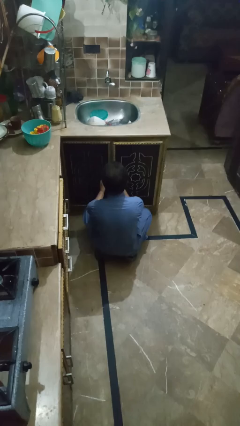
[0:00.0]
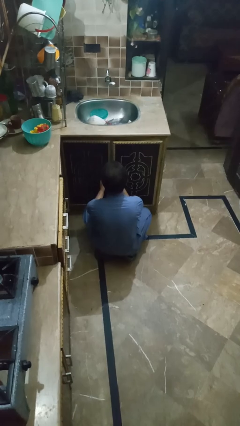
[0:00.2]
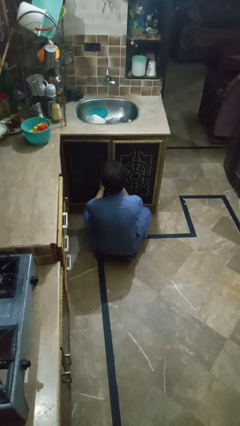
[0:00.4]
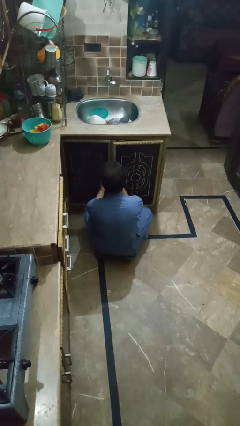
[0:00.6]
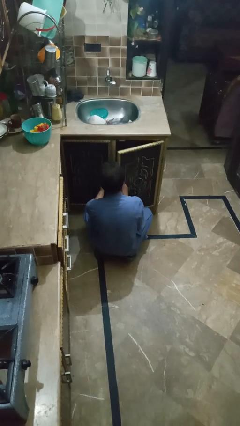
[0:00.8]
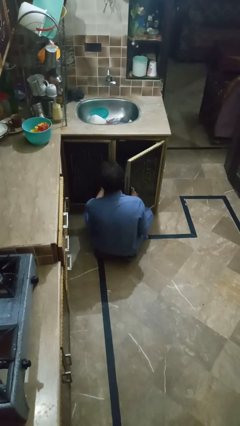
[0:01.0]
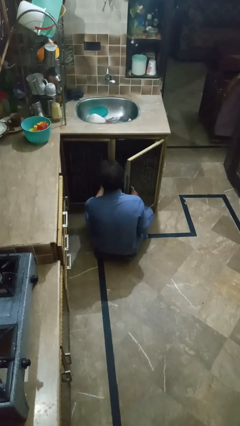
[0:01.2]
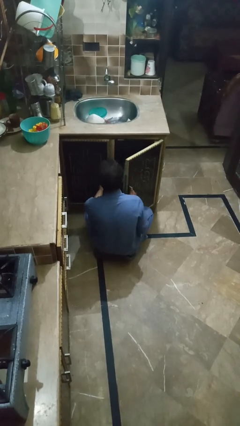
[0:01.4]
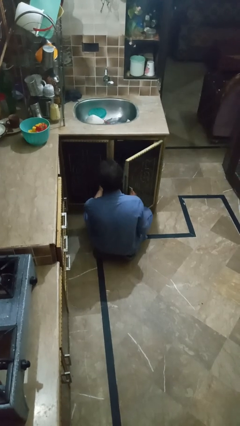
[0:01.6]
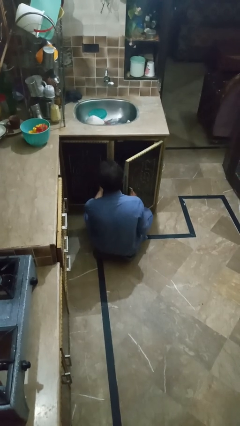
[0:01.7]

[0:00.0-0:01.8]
person opens kitchen drawer

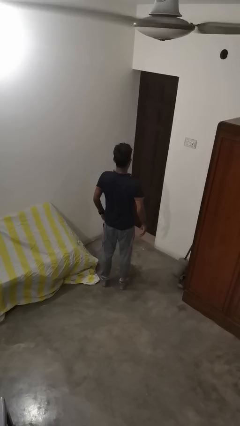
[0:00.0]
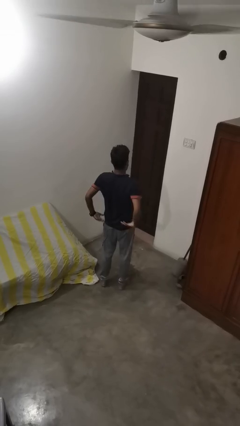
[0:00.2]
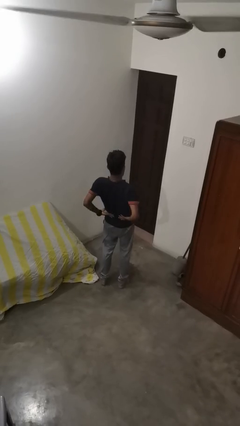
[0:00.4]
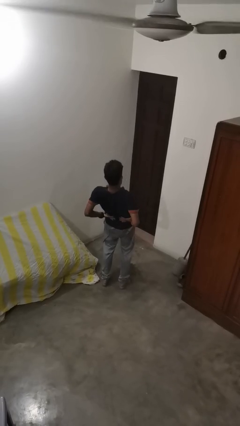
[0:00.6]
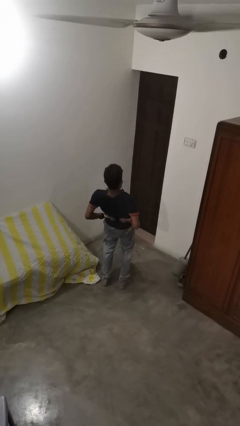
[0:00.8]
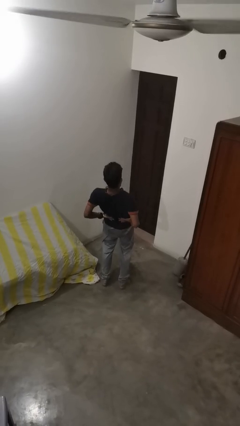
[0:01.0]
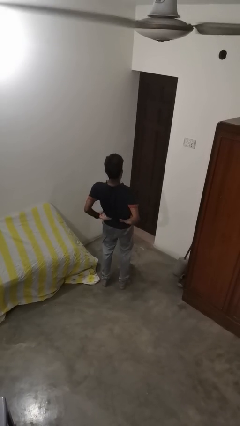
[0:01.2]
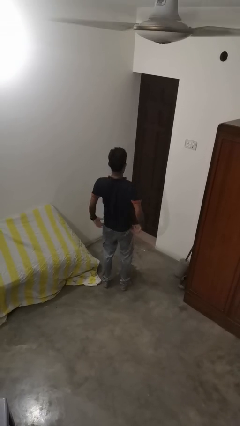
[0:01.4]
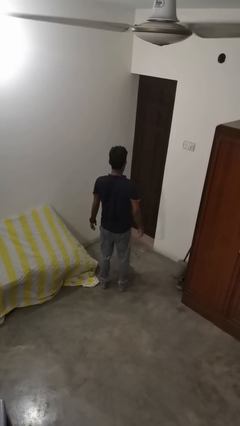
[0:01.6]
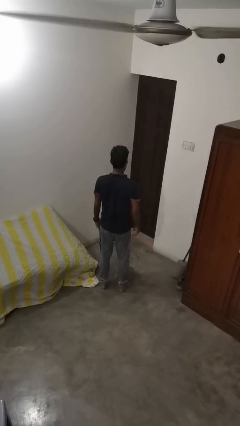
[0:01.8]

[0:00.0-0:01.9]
person stretches back

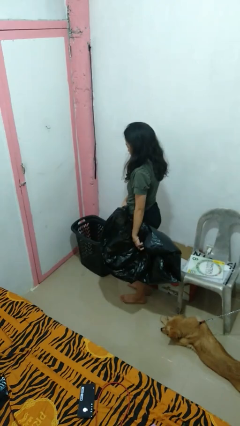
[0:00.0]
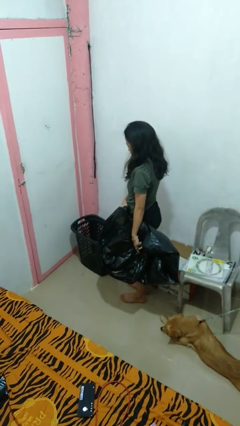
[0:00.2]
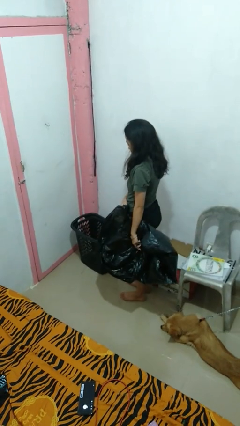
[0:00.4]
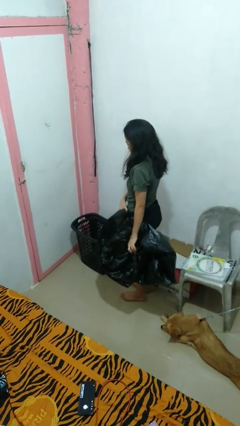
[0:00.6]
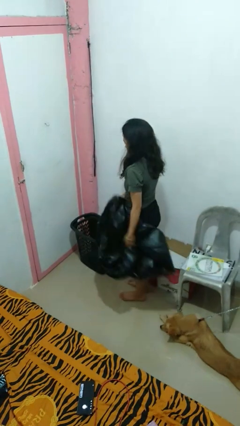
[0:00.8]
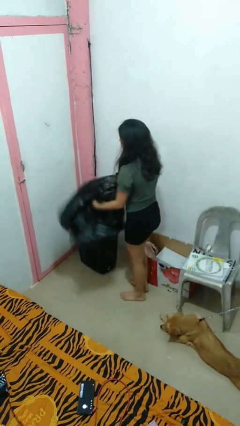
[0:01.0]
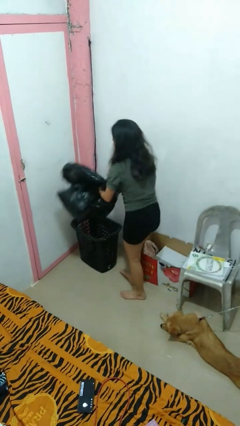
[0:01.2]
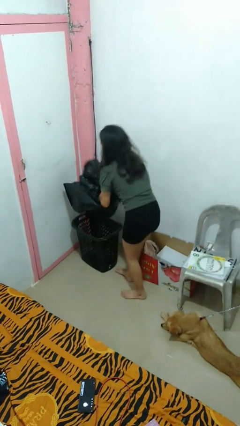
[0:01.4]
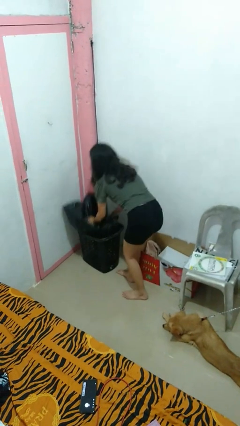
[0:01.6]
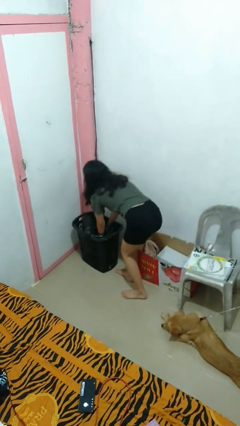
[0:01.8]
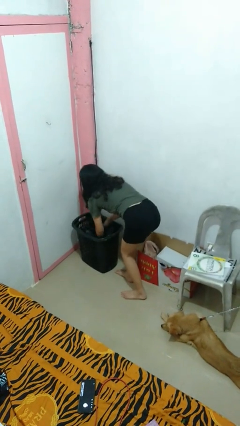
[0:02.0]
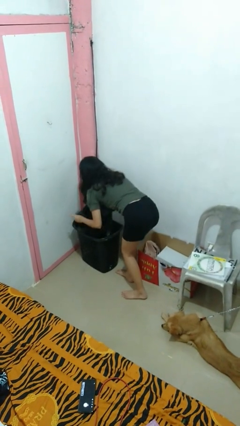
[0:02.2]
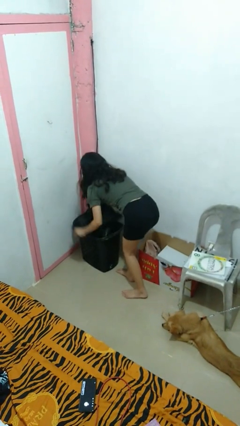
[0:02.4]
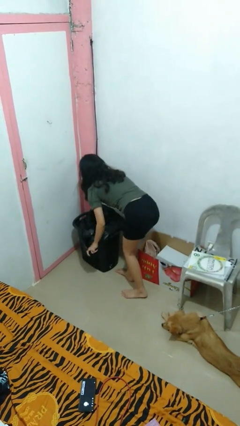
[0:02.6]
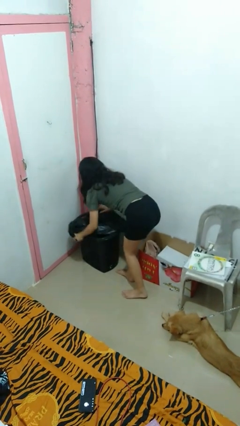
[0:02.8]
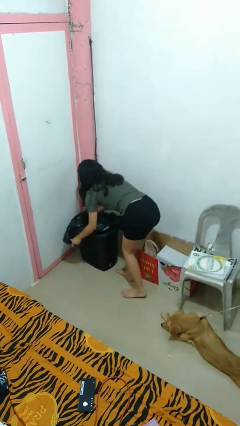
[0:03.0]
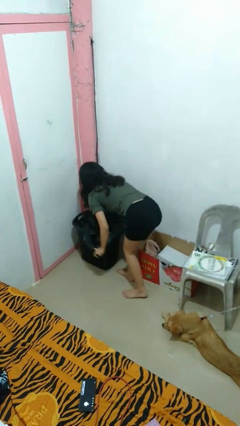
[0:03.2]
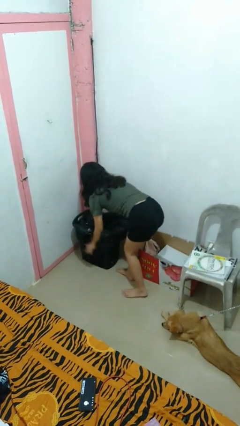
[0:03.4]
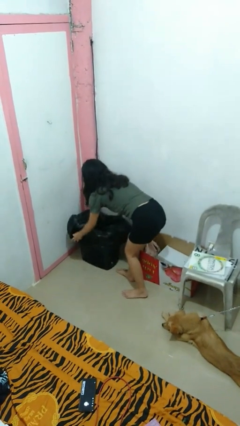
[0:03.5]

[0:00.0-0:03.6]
person inserts trashbag into trashcan

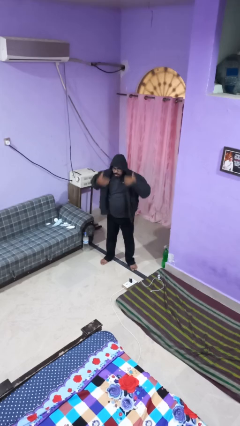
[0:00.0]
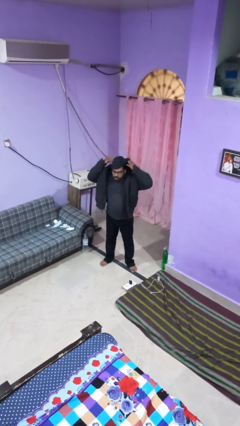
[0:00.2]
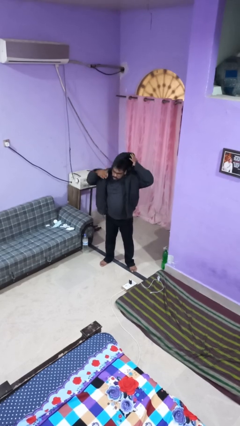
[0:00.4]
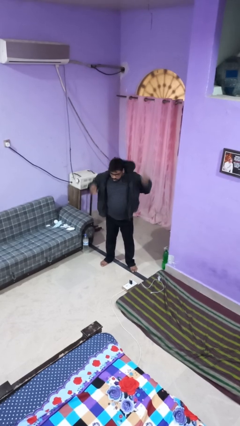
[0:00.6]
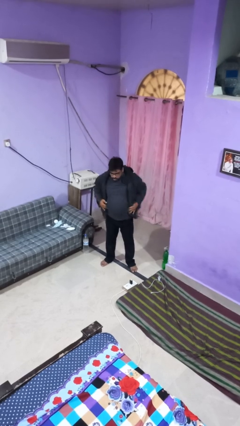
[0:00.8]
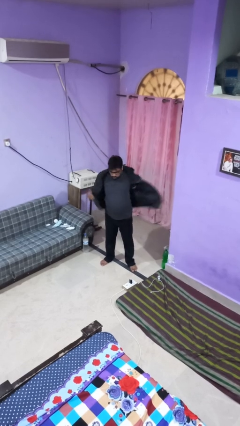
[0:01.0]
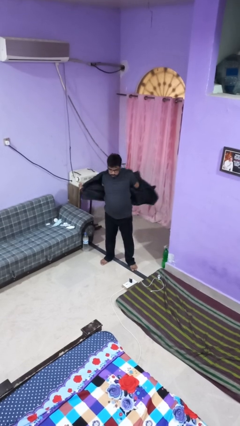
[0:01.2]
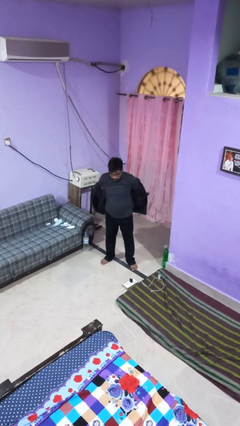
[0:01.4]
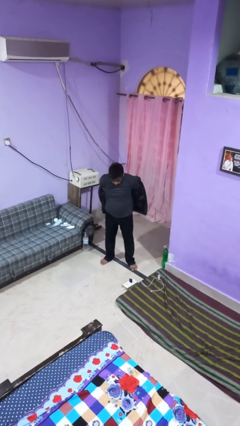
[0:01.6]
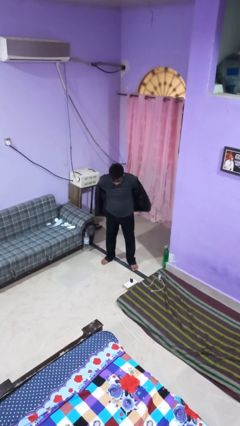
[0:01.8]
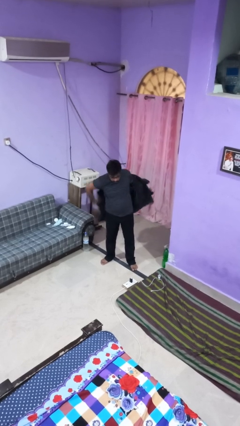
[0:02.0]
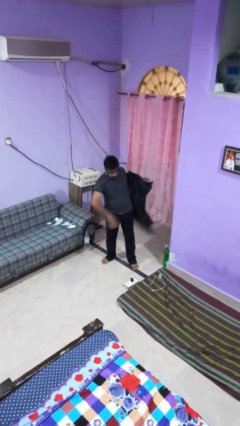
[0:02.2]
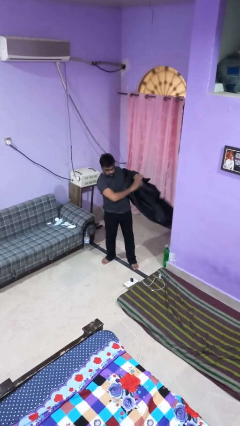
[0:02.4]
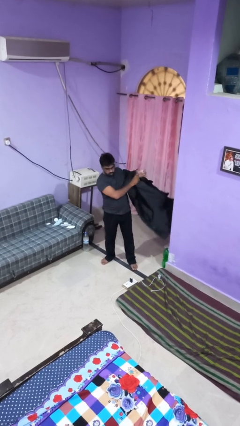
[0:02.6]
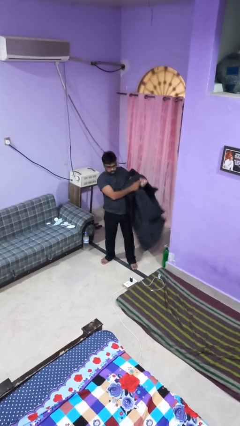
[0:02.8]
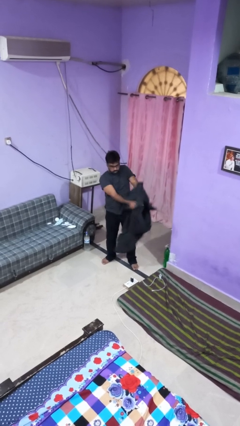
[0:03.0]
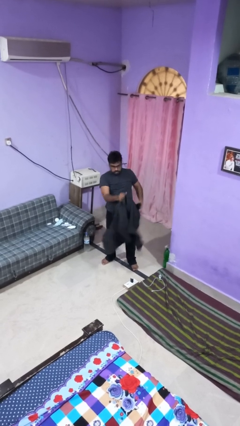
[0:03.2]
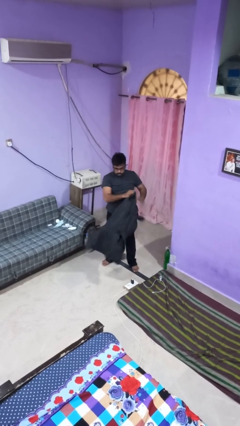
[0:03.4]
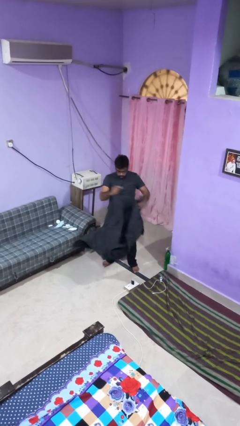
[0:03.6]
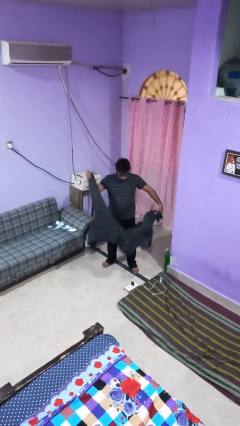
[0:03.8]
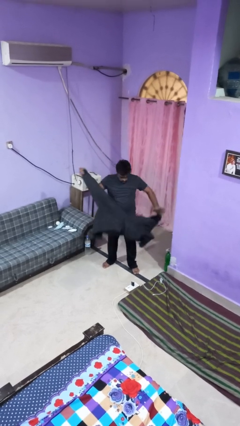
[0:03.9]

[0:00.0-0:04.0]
person takes off hoodie

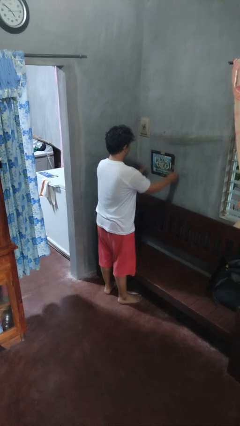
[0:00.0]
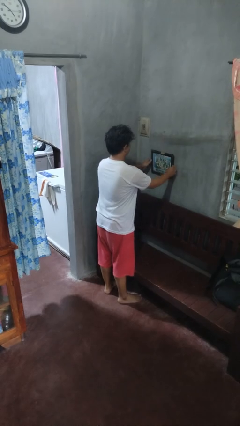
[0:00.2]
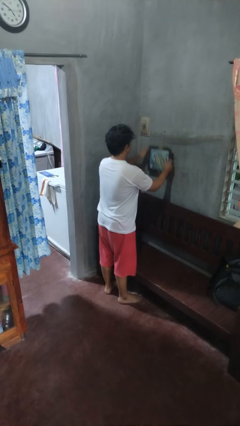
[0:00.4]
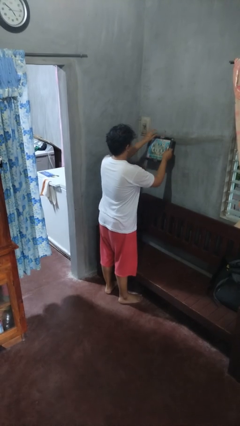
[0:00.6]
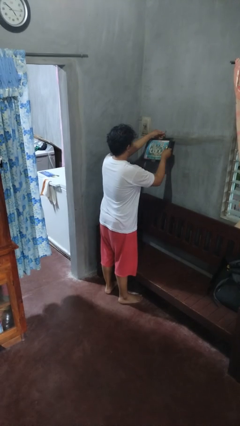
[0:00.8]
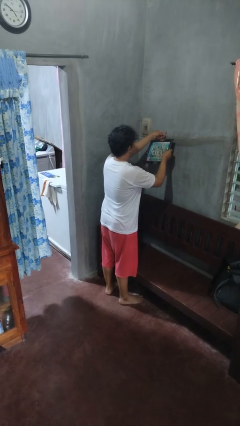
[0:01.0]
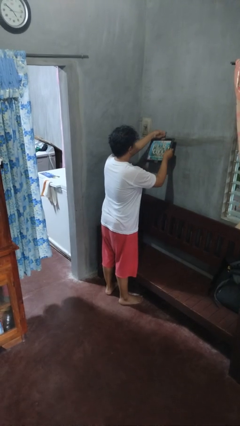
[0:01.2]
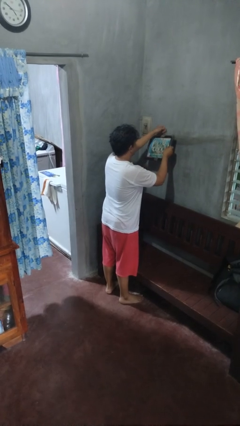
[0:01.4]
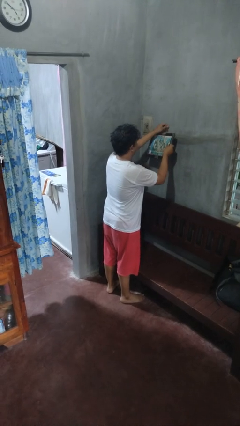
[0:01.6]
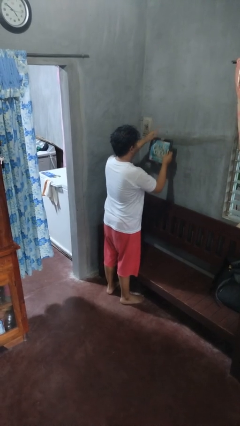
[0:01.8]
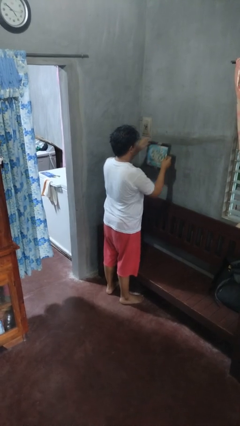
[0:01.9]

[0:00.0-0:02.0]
person takes down picture frame

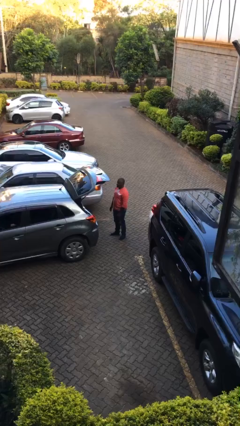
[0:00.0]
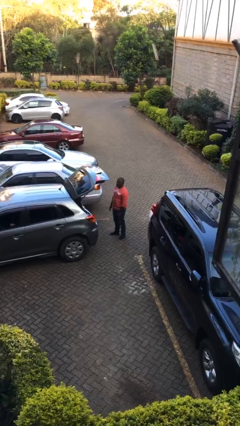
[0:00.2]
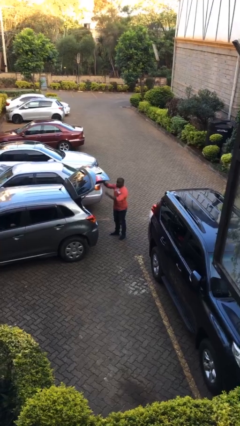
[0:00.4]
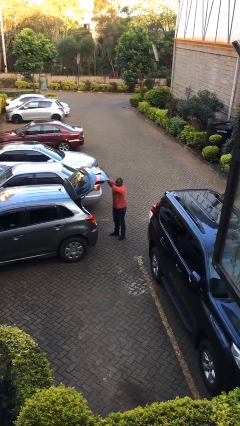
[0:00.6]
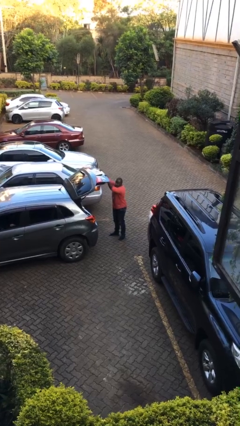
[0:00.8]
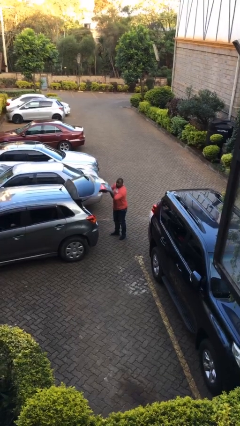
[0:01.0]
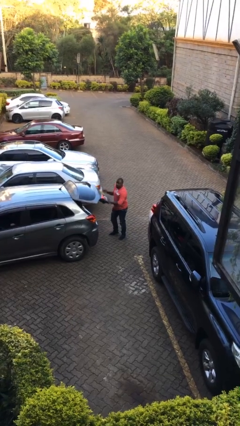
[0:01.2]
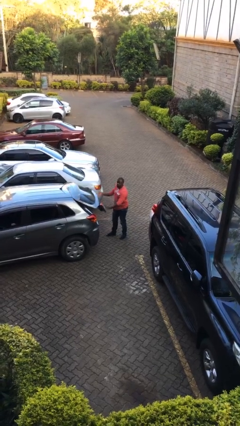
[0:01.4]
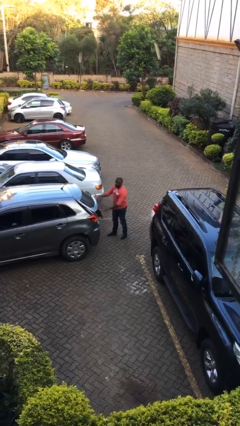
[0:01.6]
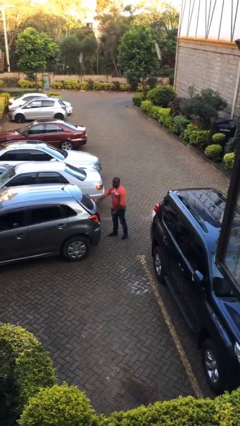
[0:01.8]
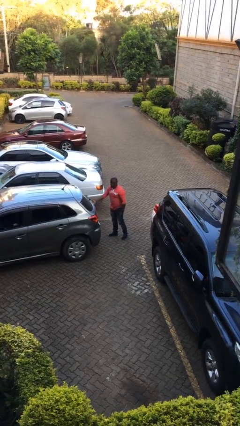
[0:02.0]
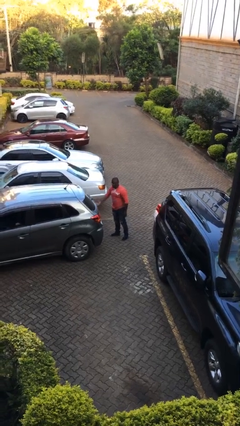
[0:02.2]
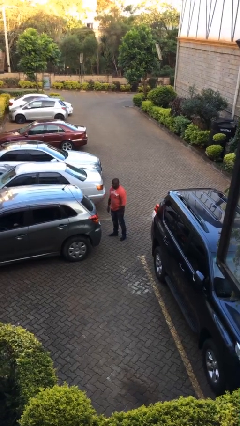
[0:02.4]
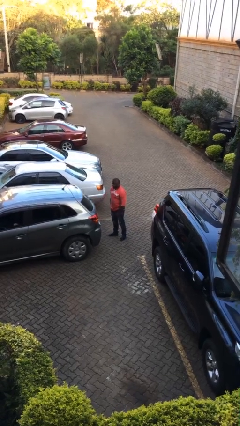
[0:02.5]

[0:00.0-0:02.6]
person closes car trunk

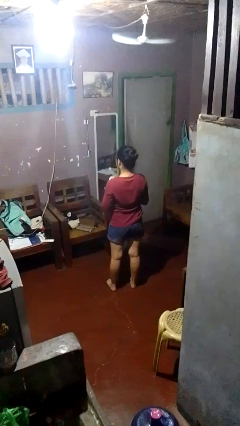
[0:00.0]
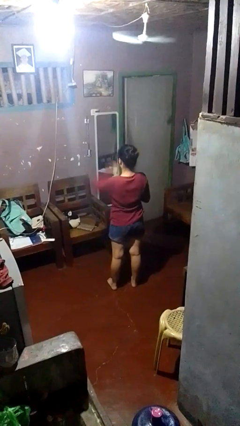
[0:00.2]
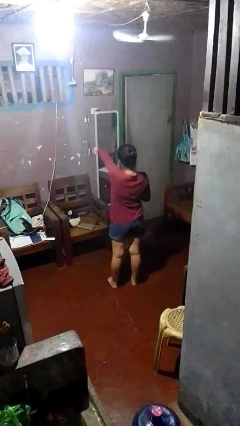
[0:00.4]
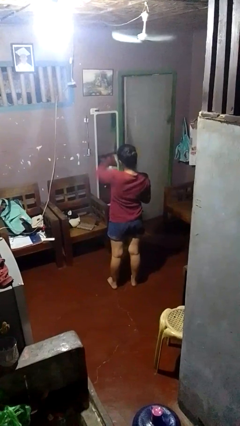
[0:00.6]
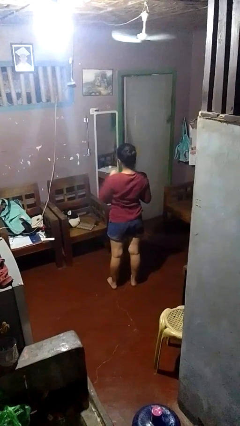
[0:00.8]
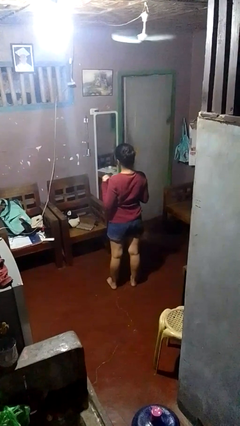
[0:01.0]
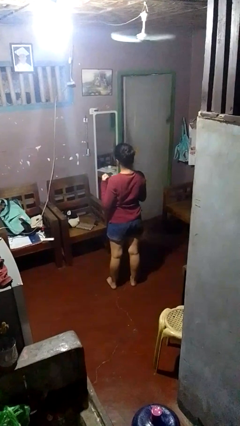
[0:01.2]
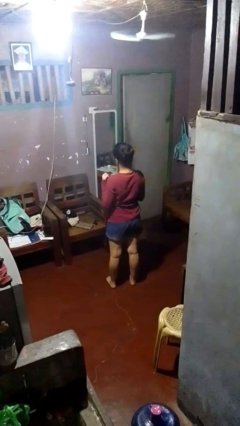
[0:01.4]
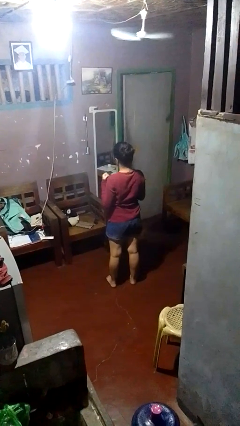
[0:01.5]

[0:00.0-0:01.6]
person punches
